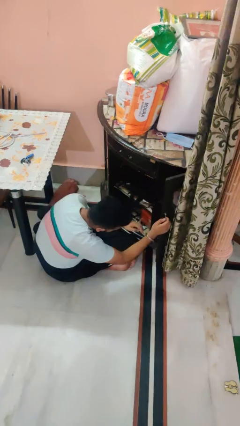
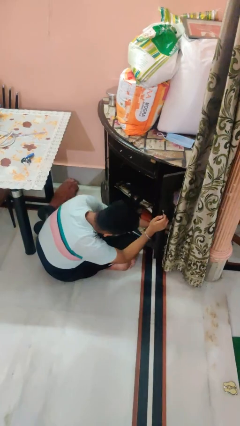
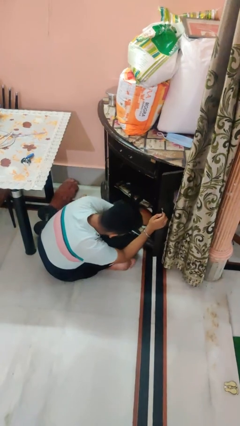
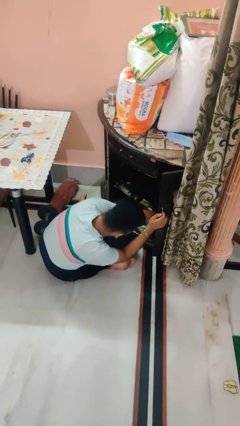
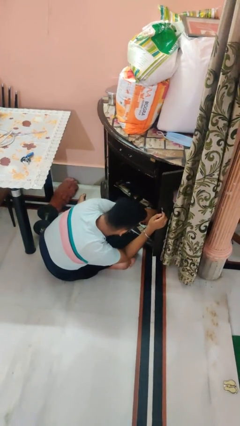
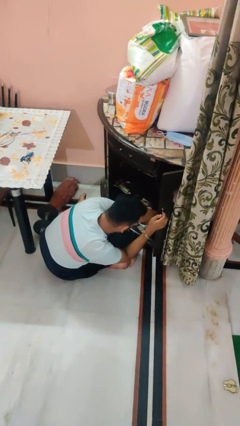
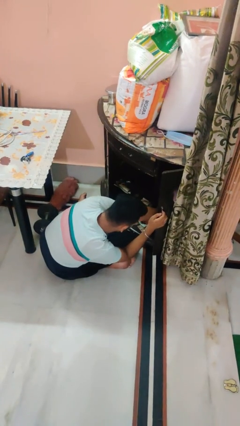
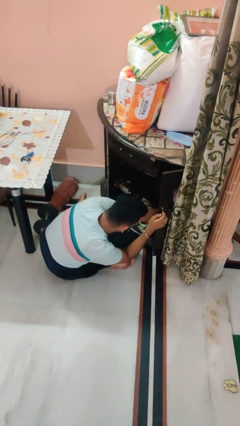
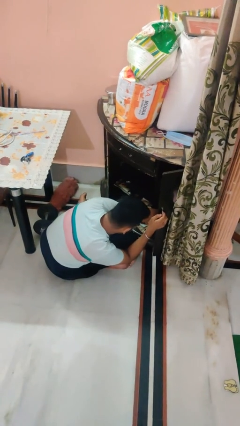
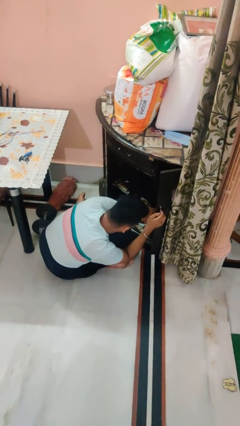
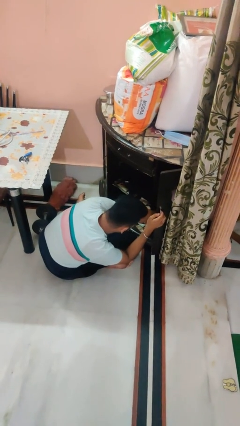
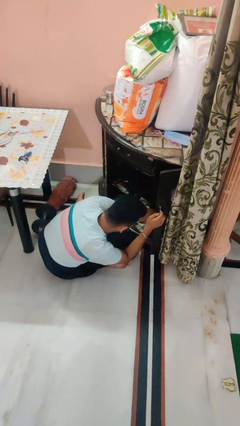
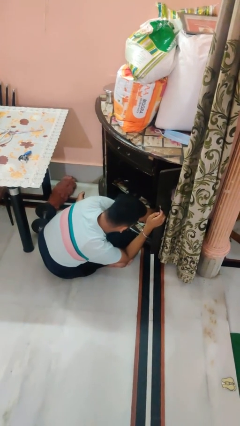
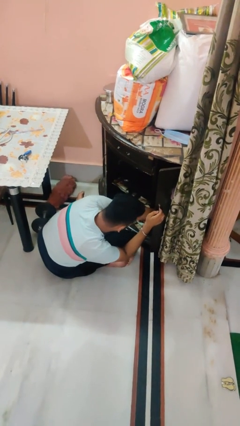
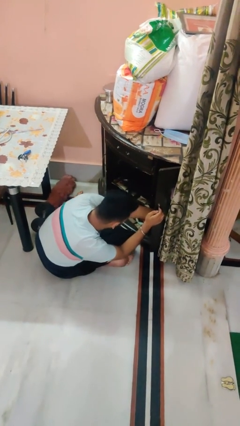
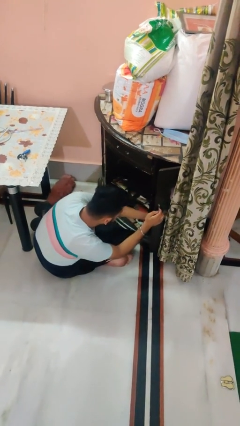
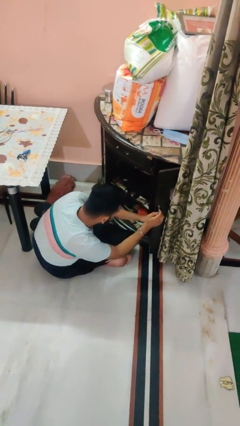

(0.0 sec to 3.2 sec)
person searches in cabinet

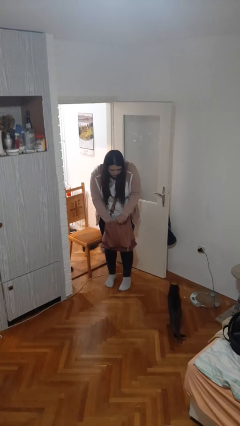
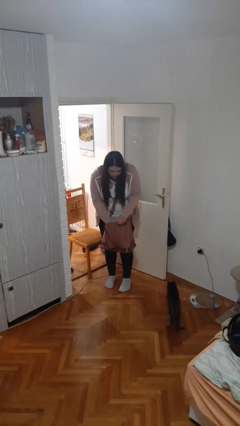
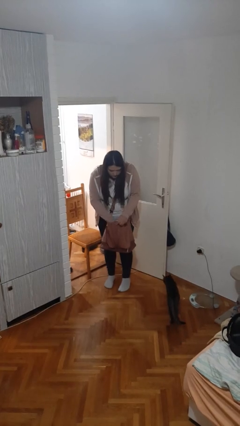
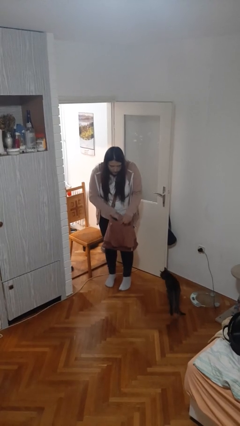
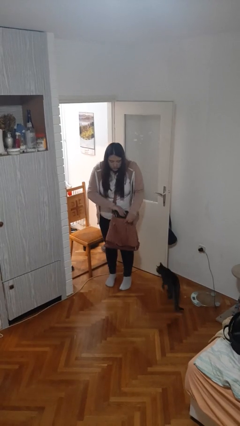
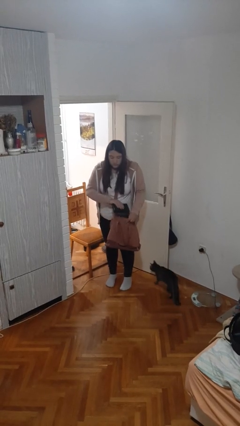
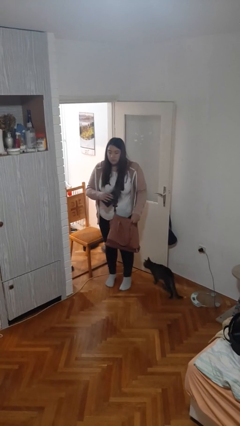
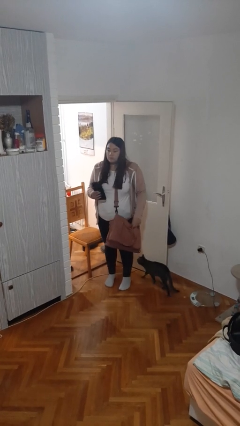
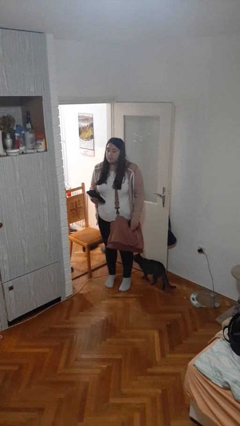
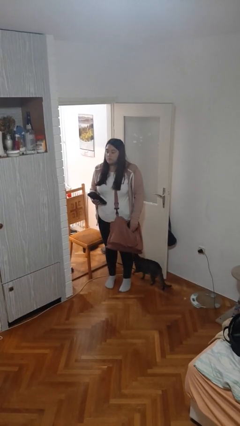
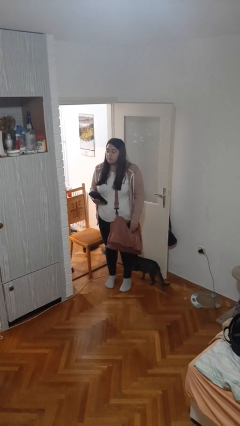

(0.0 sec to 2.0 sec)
person takes object from purse

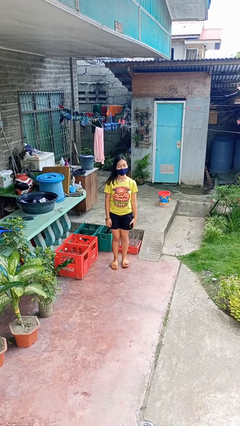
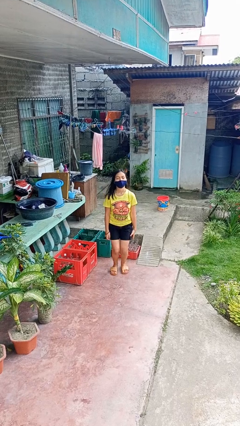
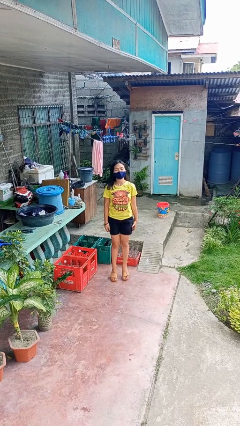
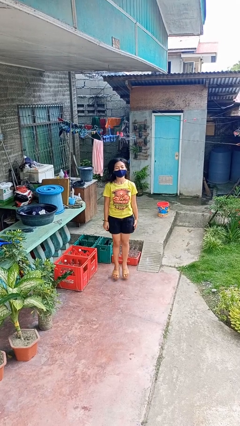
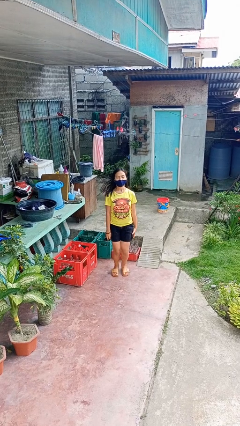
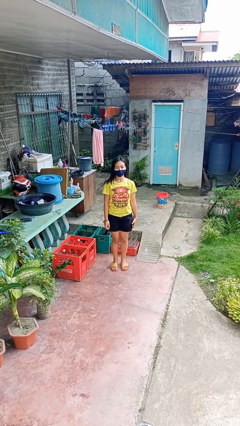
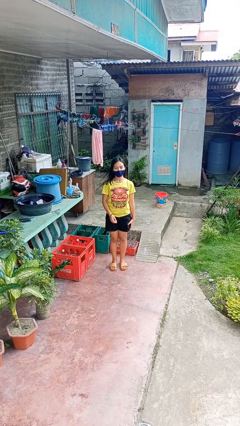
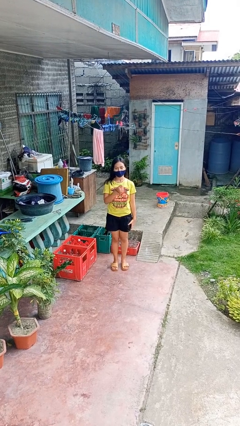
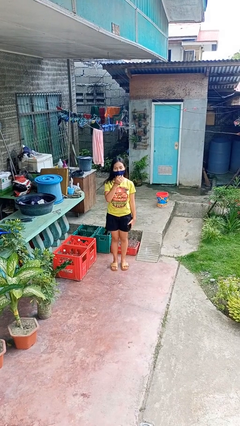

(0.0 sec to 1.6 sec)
person jumps

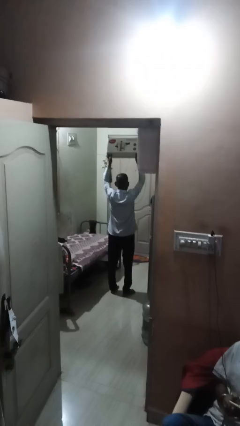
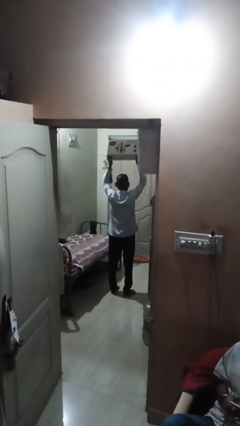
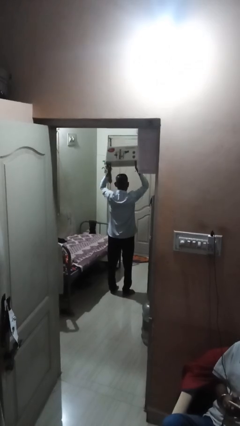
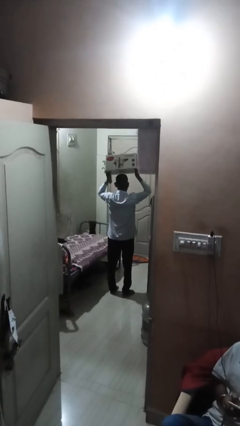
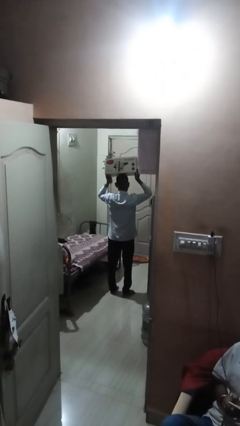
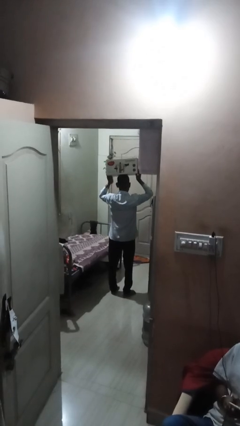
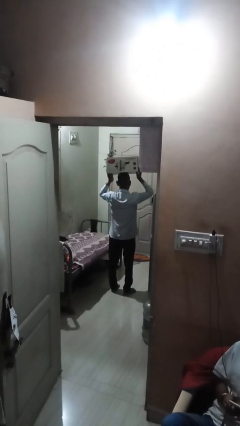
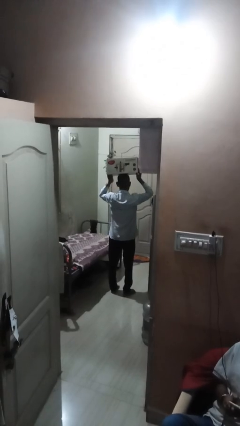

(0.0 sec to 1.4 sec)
person holds object above head

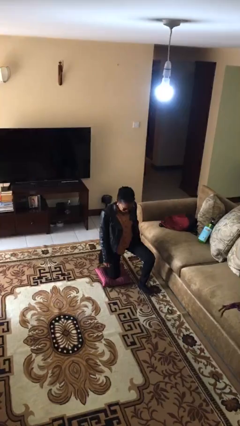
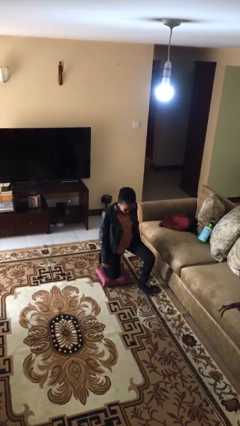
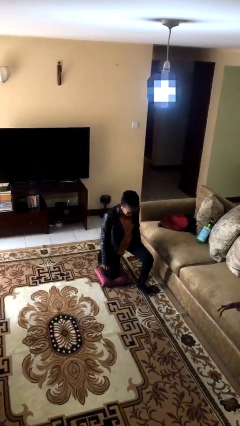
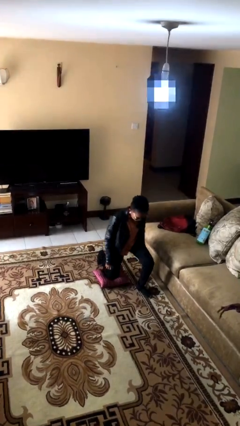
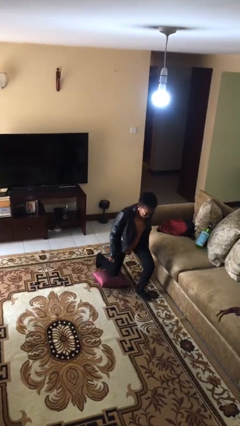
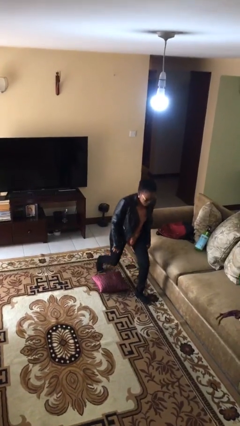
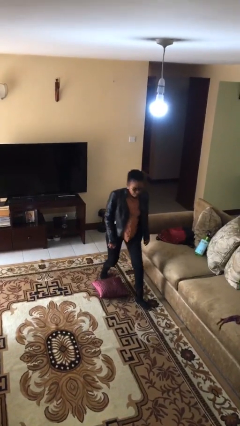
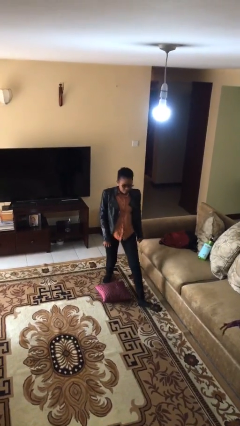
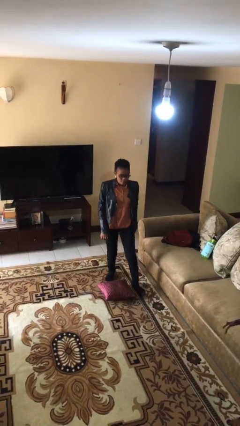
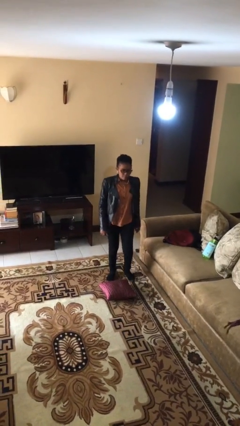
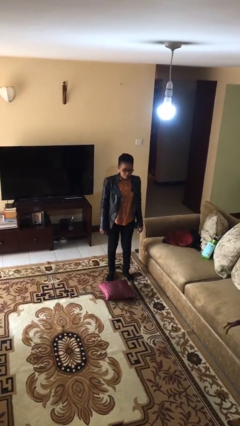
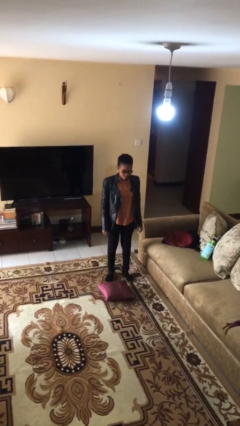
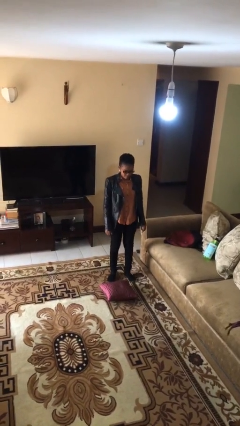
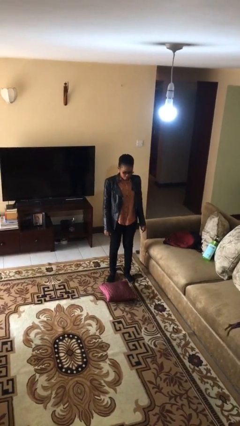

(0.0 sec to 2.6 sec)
person stands up from floor

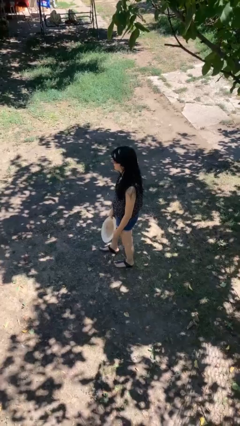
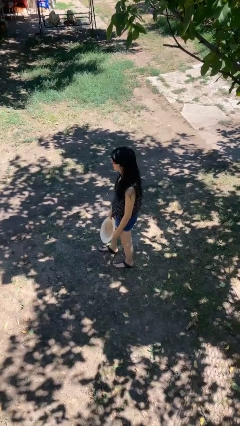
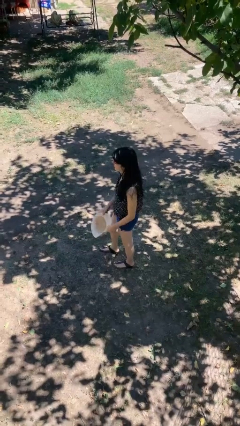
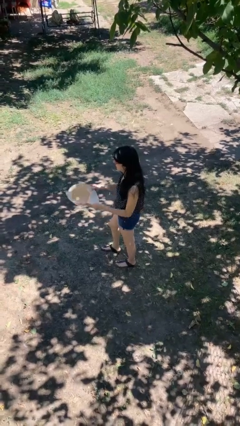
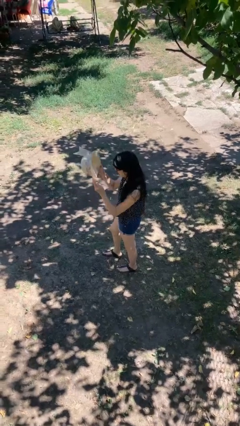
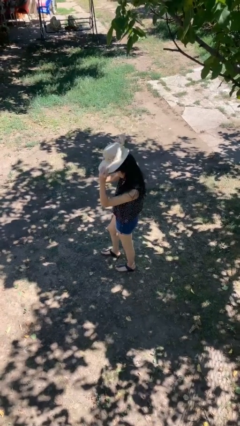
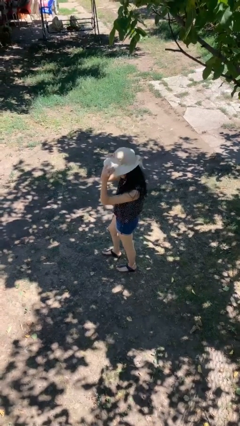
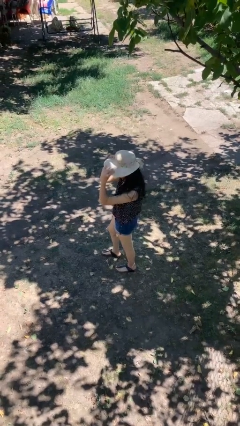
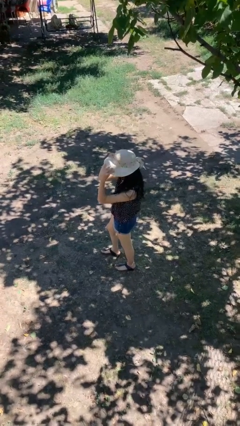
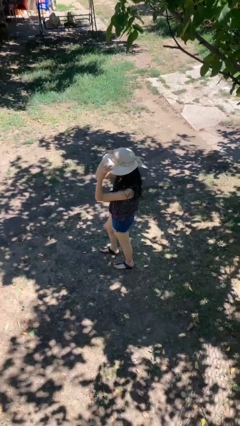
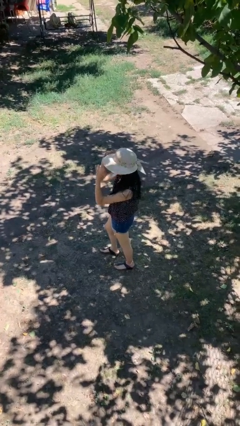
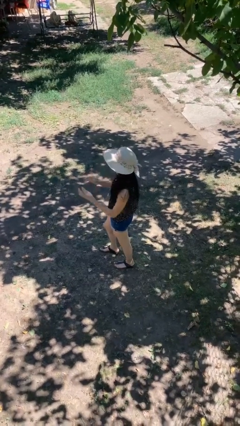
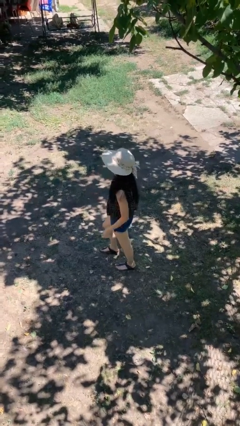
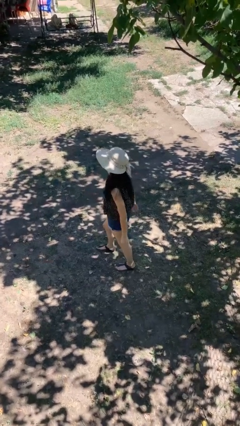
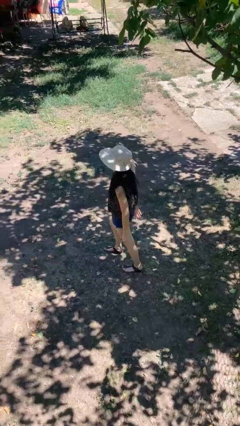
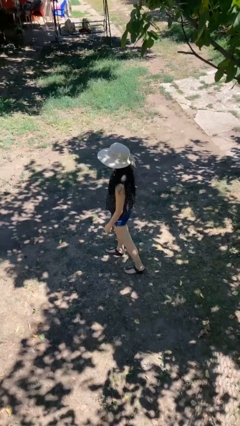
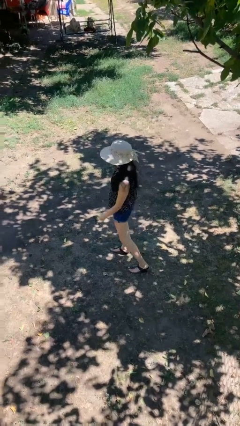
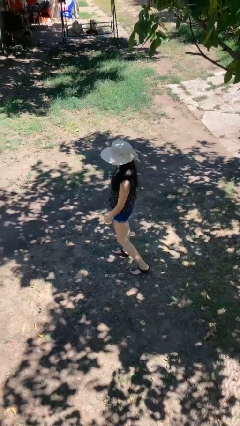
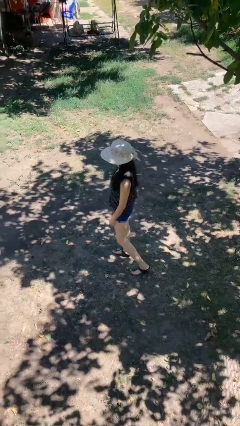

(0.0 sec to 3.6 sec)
person puts on hat

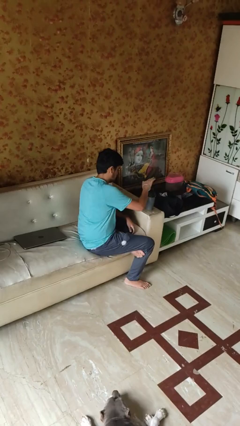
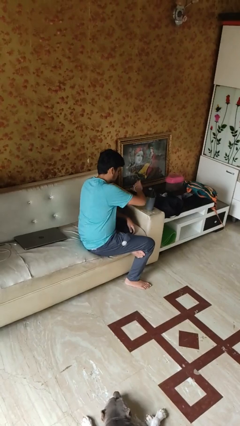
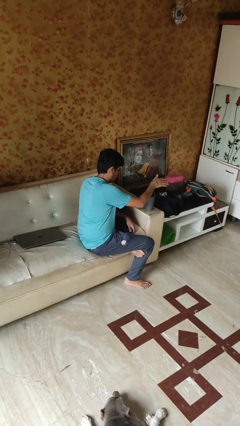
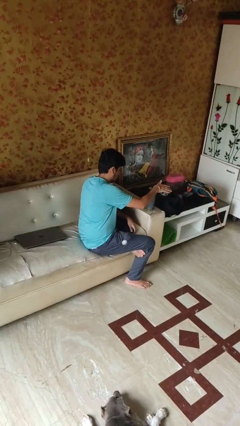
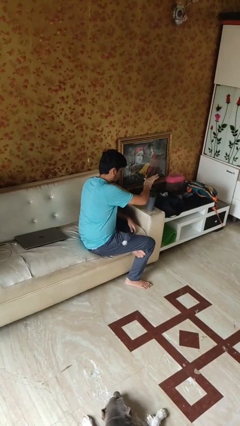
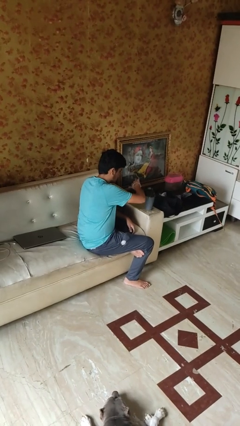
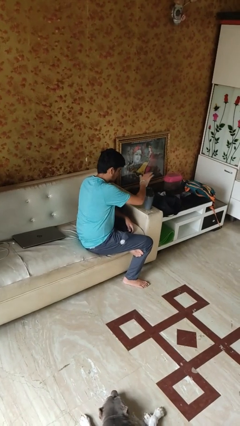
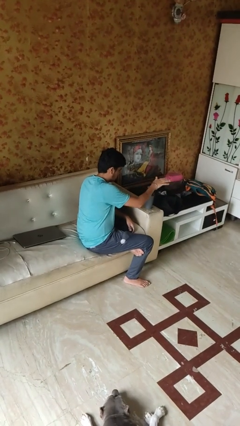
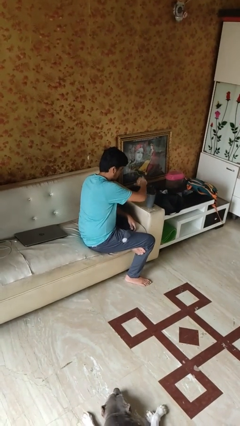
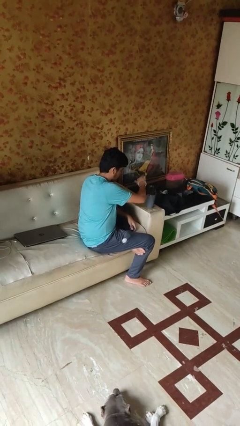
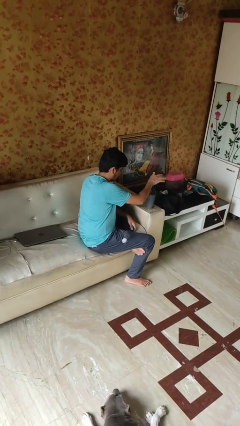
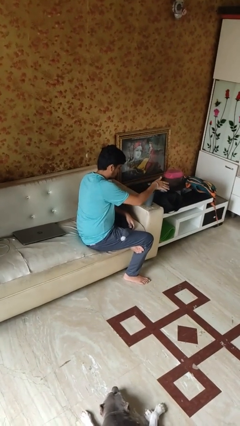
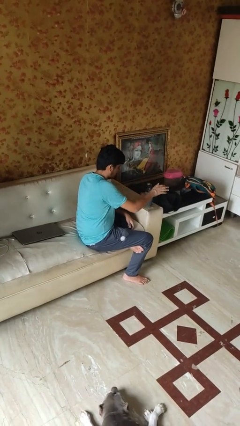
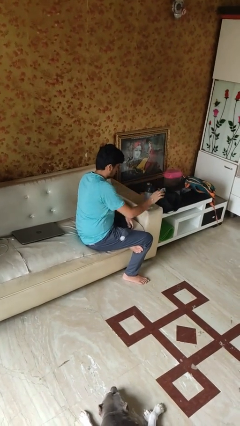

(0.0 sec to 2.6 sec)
person waves hand over object

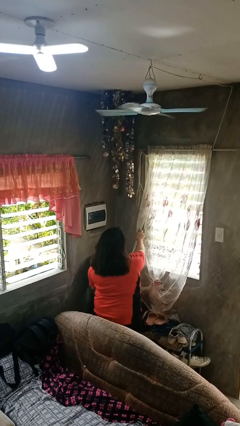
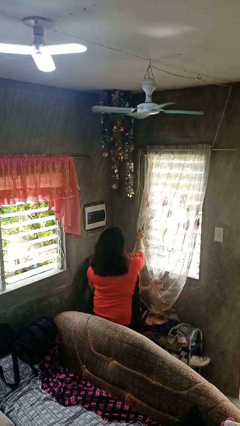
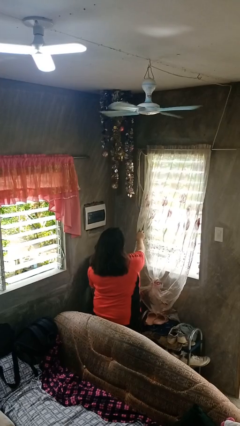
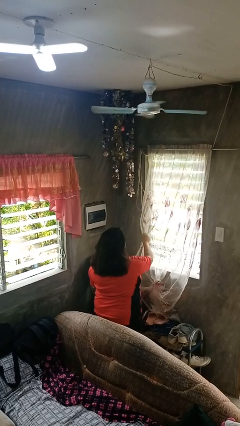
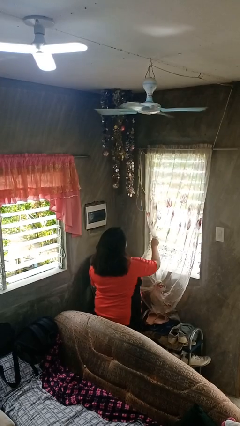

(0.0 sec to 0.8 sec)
person opens curtains
